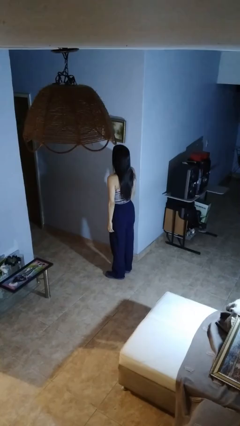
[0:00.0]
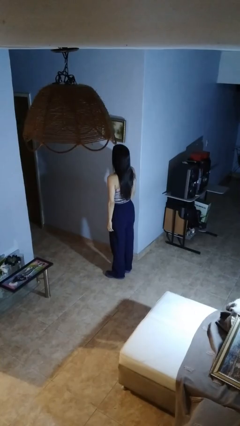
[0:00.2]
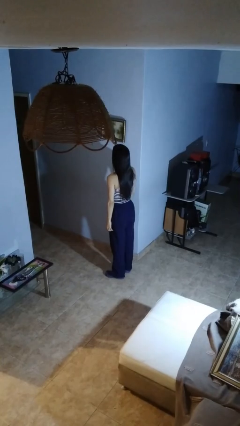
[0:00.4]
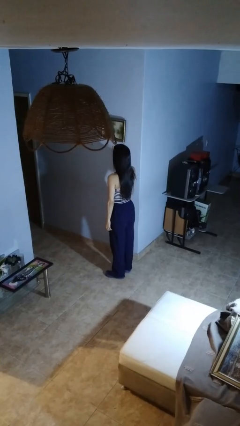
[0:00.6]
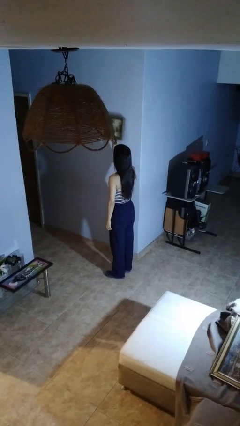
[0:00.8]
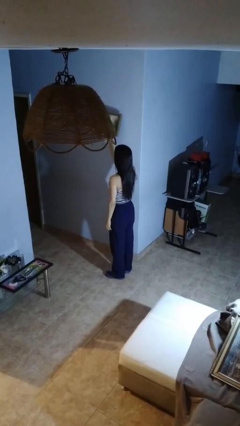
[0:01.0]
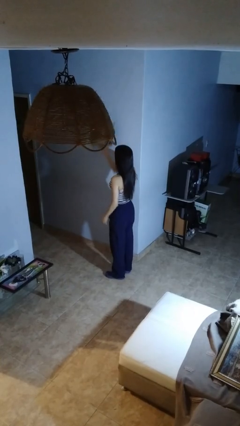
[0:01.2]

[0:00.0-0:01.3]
person takes down picture frame

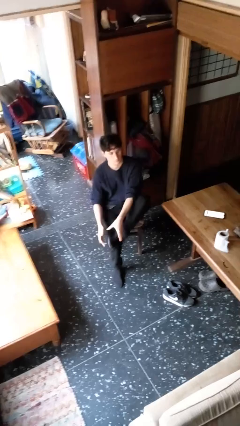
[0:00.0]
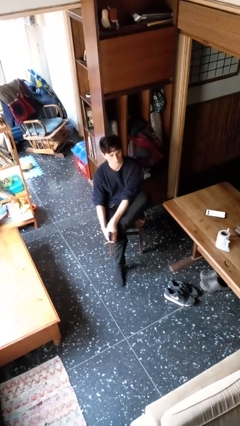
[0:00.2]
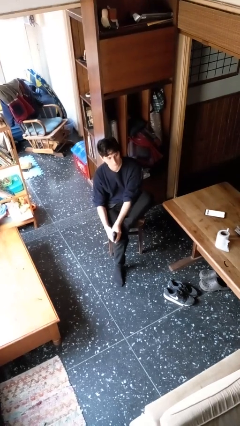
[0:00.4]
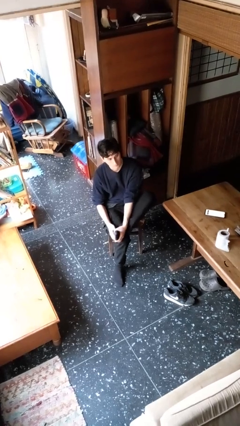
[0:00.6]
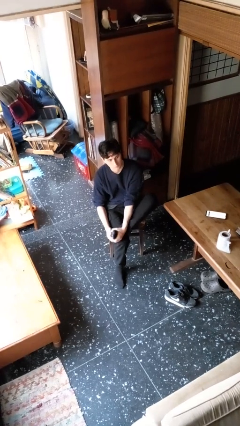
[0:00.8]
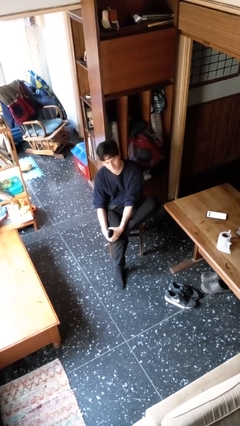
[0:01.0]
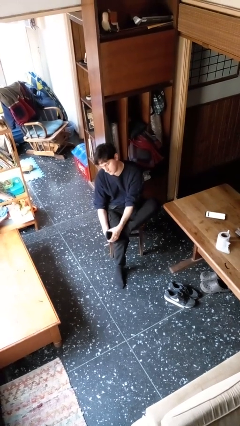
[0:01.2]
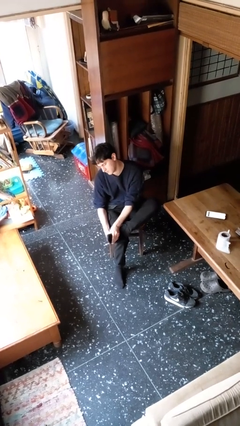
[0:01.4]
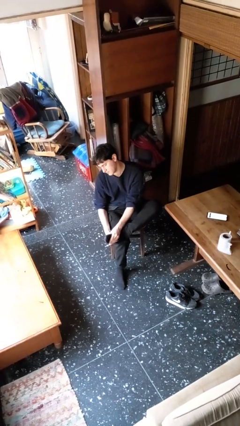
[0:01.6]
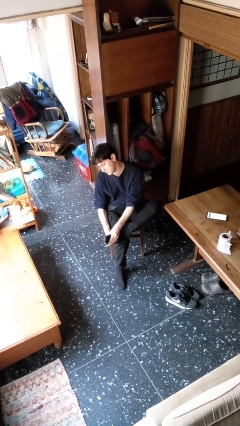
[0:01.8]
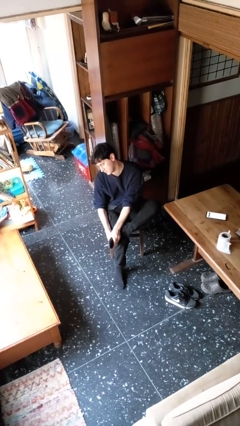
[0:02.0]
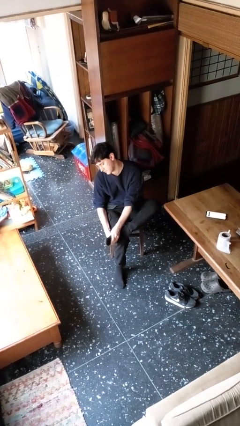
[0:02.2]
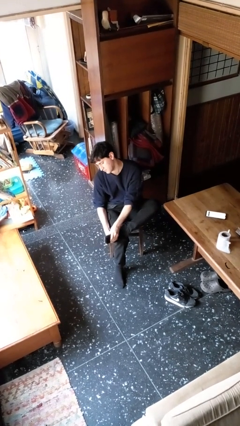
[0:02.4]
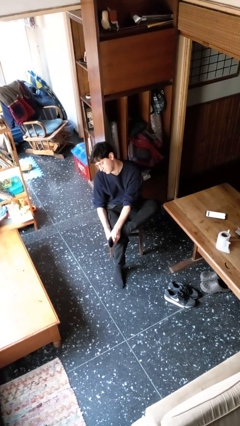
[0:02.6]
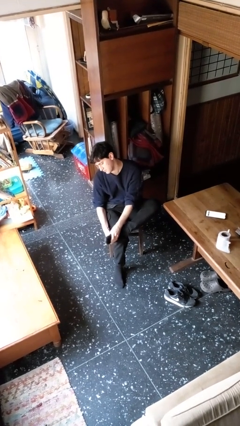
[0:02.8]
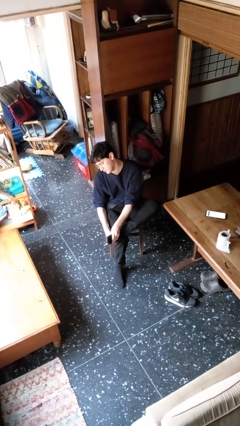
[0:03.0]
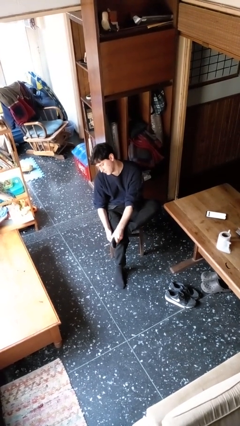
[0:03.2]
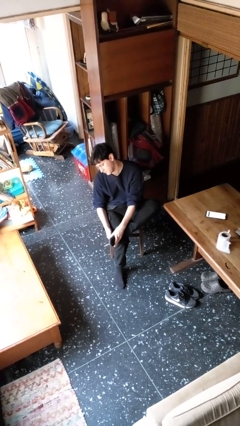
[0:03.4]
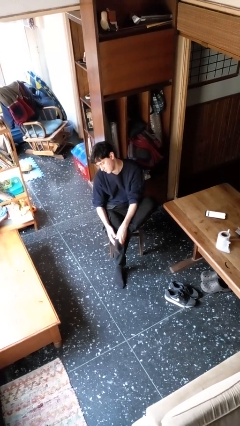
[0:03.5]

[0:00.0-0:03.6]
person rubs foot

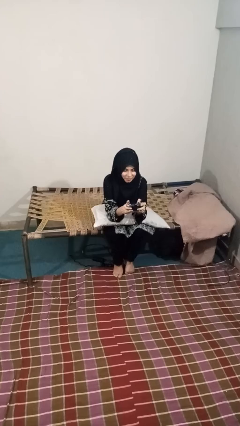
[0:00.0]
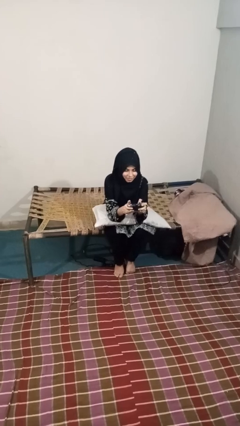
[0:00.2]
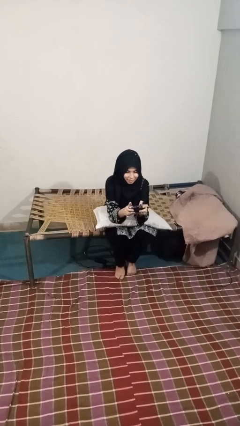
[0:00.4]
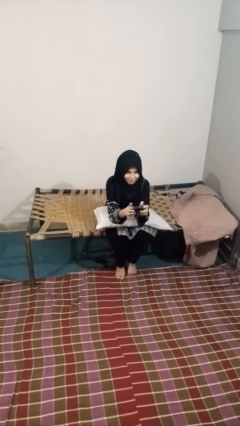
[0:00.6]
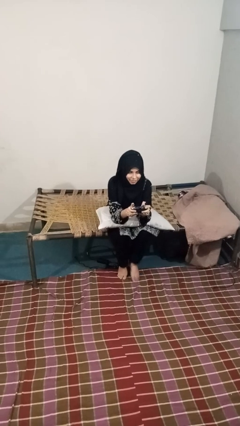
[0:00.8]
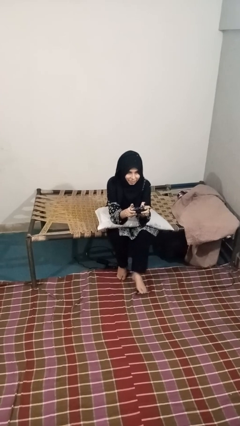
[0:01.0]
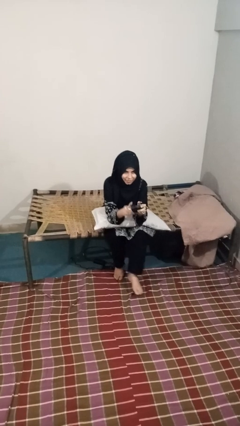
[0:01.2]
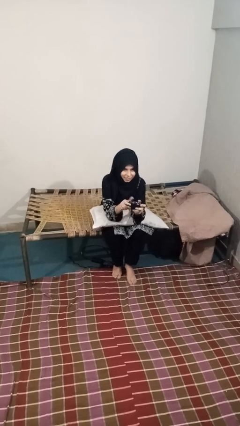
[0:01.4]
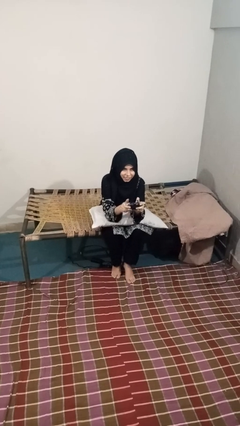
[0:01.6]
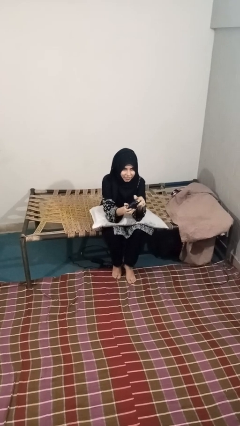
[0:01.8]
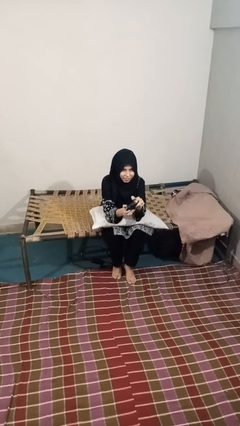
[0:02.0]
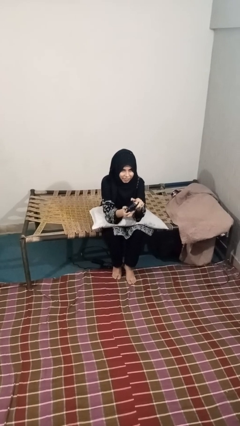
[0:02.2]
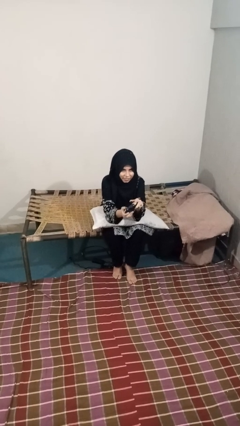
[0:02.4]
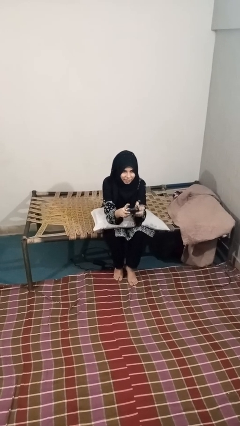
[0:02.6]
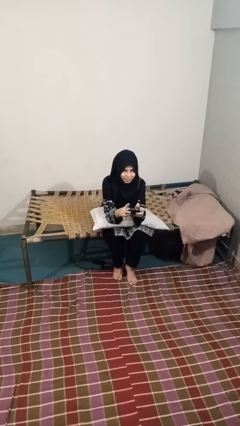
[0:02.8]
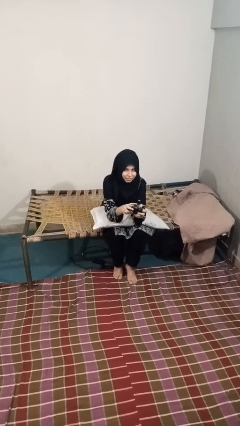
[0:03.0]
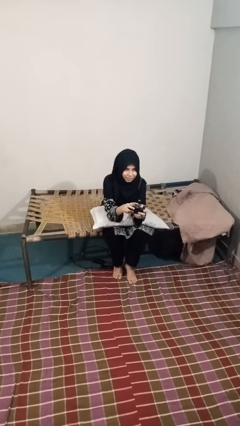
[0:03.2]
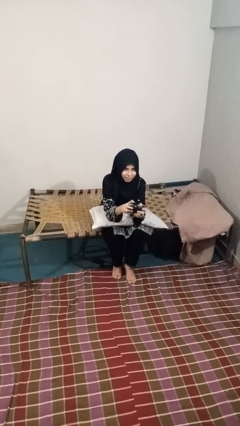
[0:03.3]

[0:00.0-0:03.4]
person interacts with handheld game

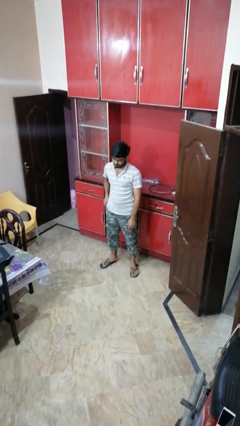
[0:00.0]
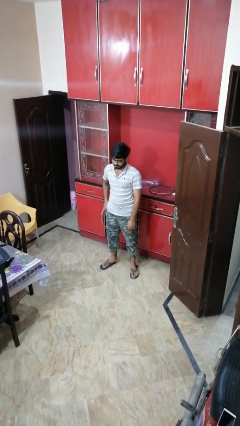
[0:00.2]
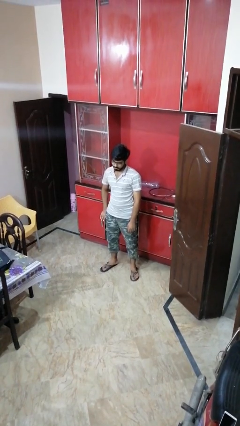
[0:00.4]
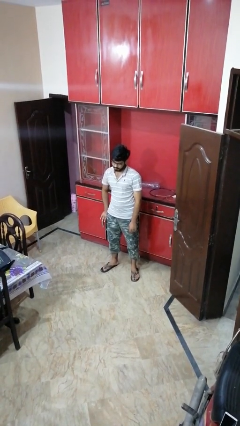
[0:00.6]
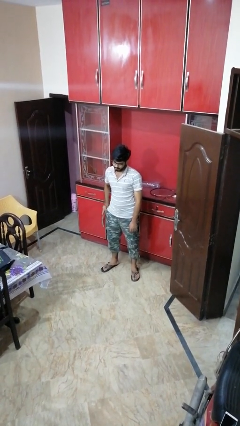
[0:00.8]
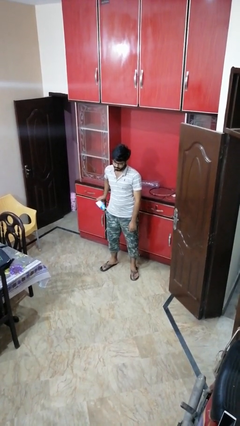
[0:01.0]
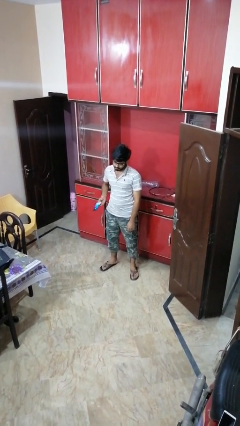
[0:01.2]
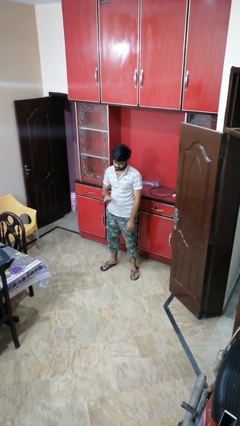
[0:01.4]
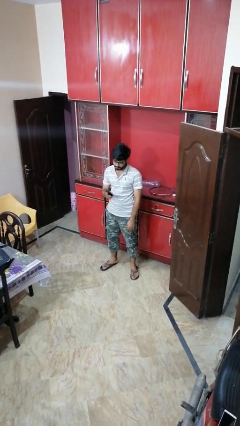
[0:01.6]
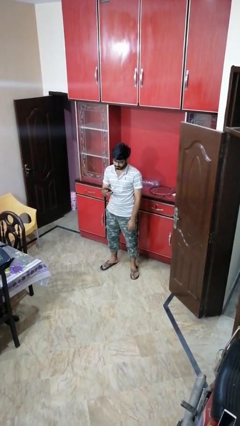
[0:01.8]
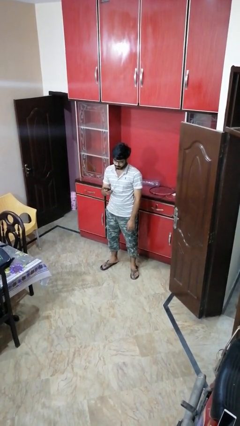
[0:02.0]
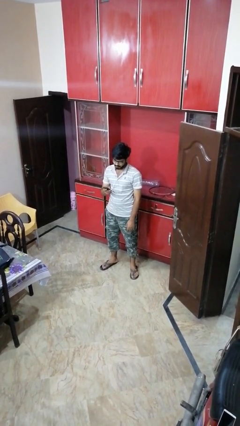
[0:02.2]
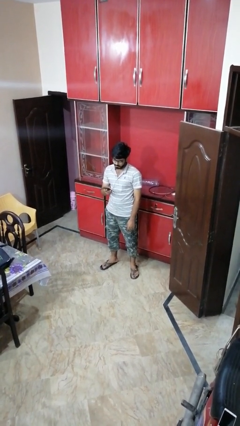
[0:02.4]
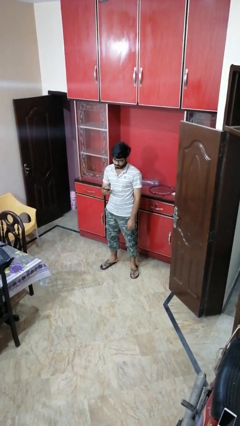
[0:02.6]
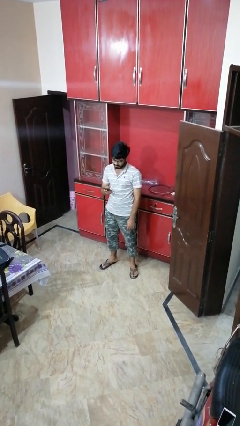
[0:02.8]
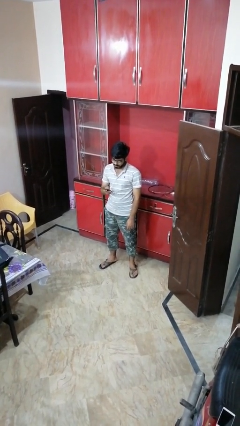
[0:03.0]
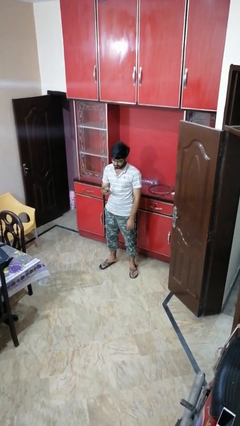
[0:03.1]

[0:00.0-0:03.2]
person takes phone from pocket

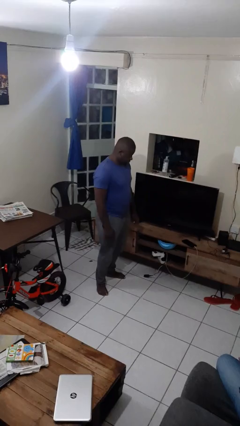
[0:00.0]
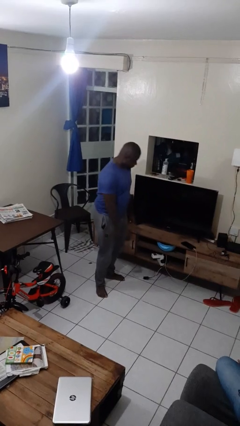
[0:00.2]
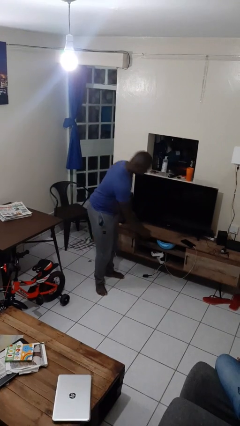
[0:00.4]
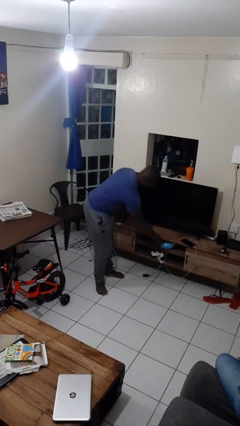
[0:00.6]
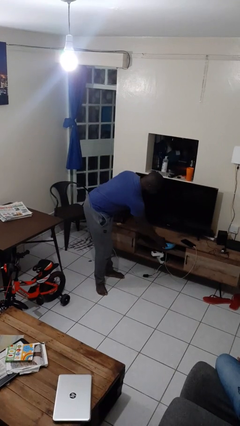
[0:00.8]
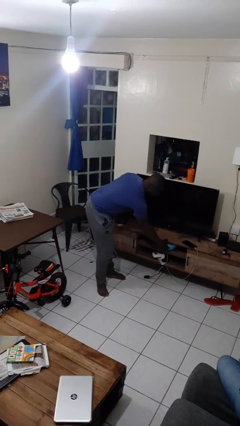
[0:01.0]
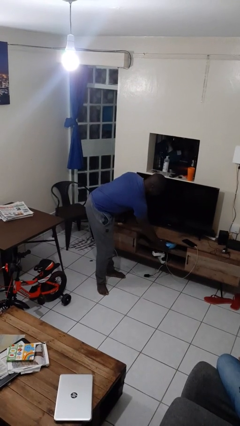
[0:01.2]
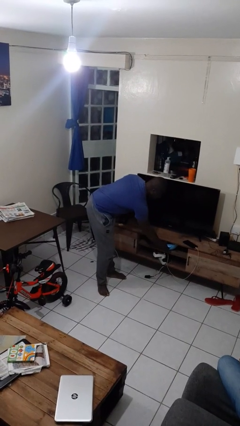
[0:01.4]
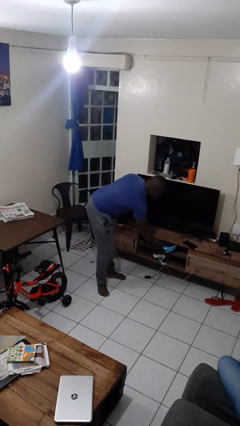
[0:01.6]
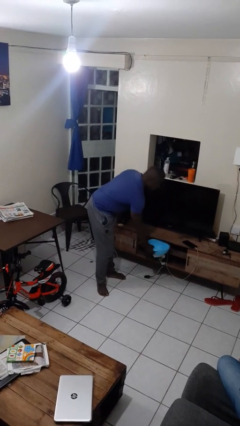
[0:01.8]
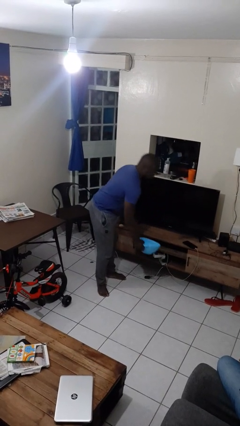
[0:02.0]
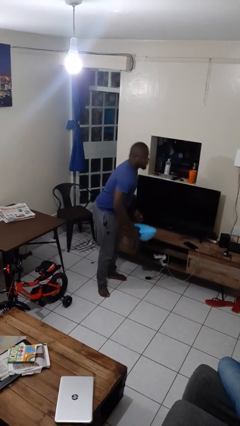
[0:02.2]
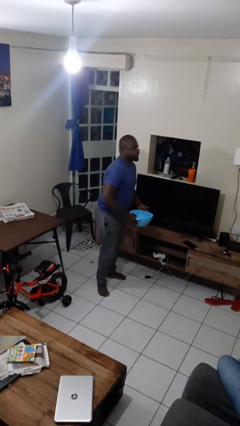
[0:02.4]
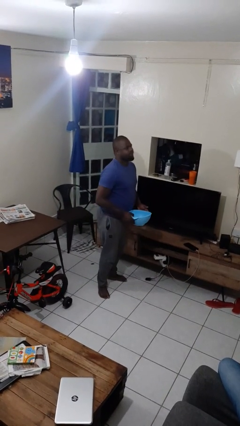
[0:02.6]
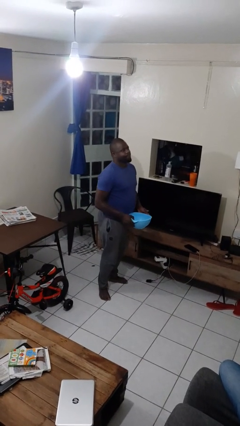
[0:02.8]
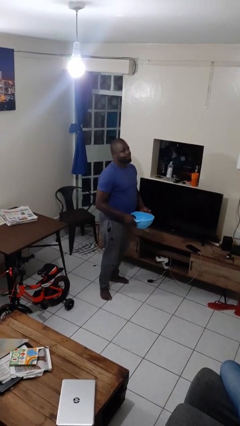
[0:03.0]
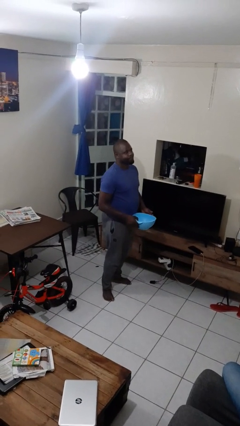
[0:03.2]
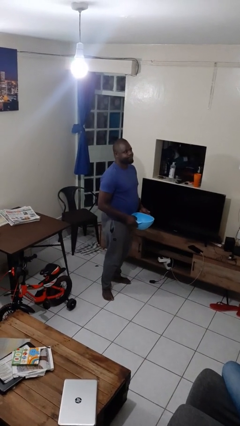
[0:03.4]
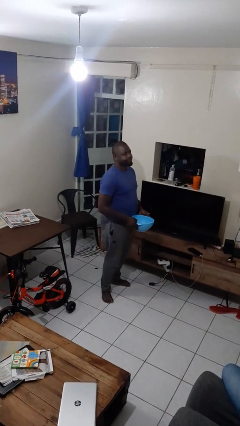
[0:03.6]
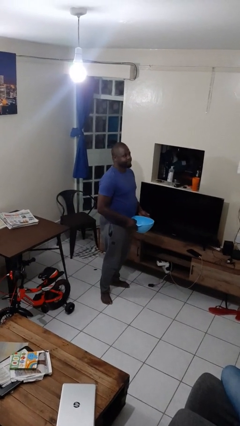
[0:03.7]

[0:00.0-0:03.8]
person picks up object from cabinet

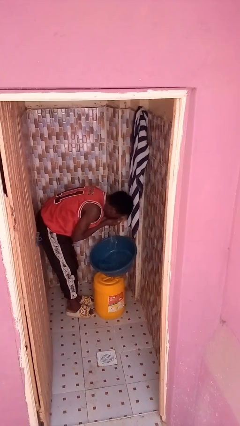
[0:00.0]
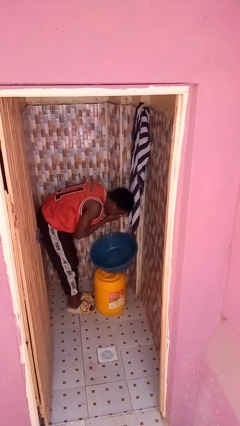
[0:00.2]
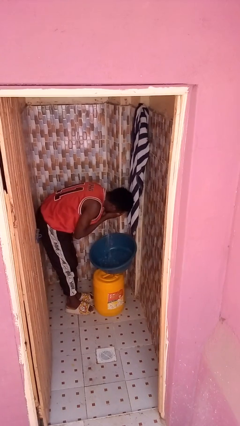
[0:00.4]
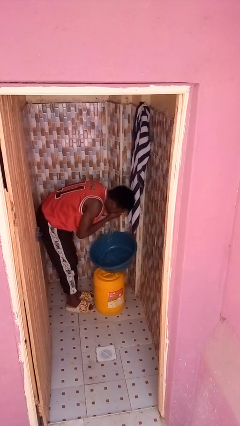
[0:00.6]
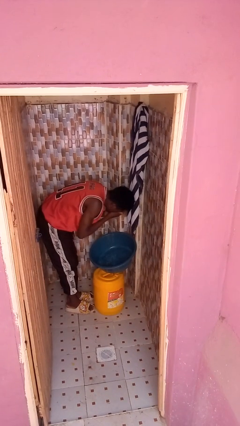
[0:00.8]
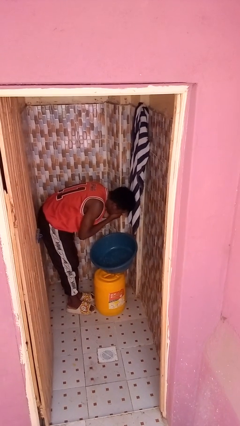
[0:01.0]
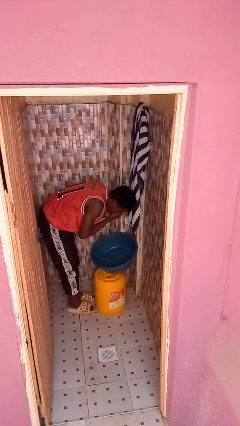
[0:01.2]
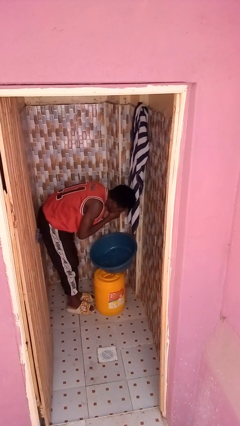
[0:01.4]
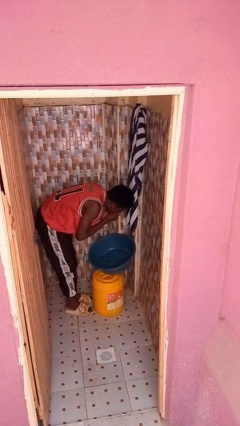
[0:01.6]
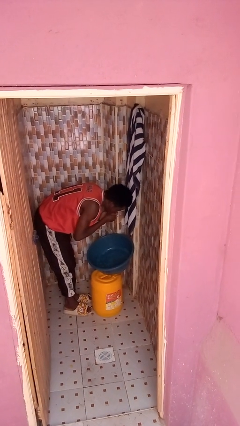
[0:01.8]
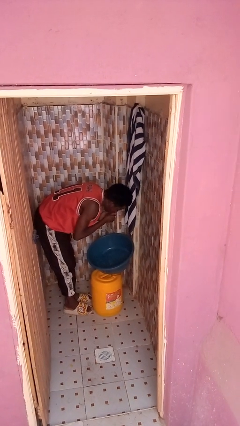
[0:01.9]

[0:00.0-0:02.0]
person washes face

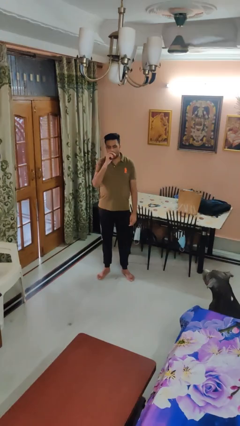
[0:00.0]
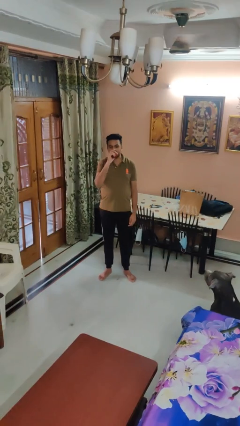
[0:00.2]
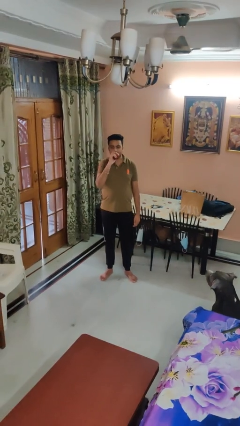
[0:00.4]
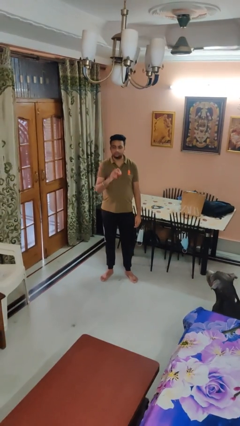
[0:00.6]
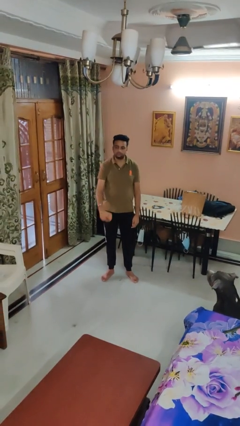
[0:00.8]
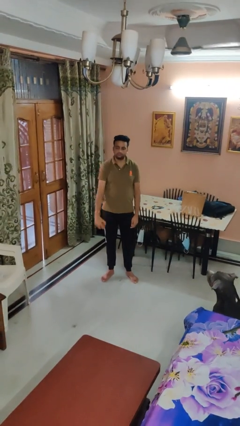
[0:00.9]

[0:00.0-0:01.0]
person eats apple
